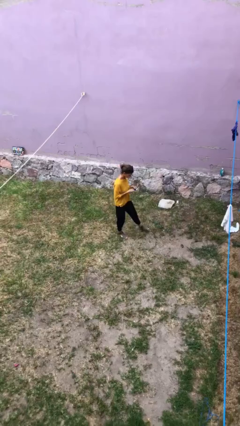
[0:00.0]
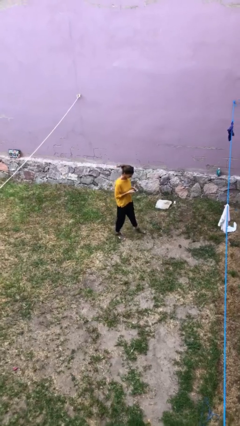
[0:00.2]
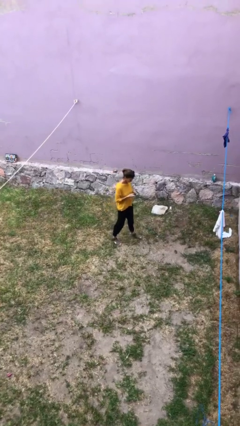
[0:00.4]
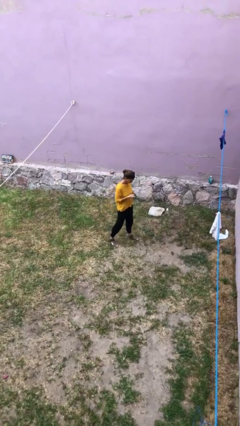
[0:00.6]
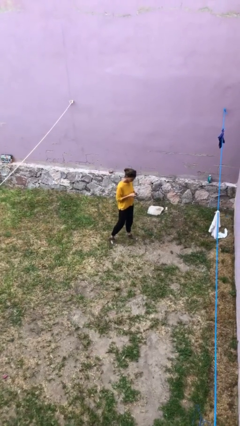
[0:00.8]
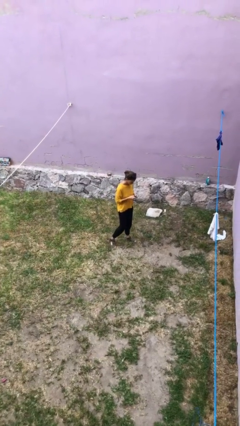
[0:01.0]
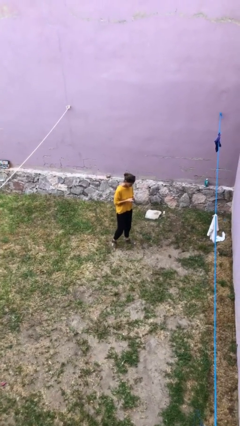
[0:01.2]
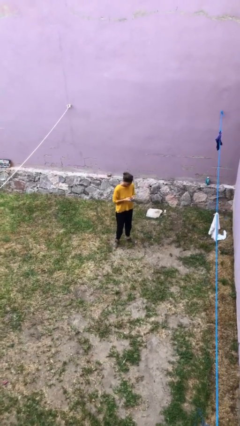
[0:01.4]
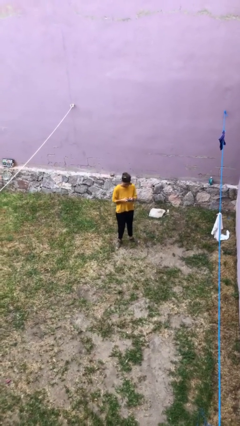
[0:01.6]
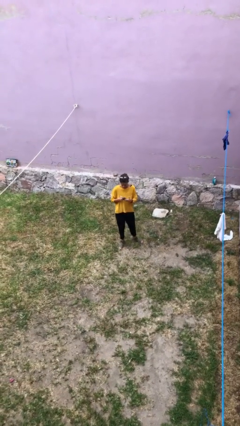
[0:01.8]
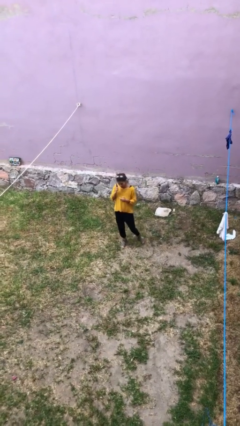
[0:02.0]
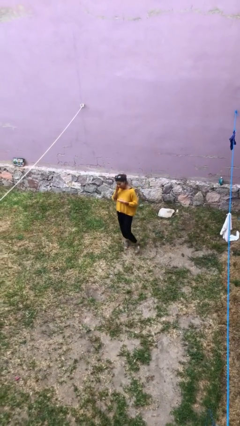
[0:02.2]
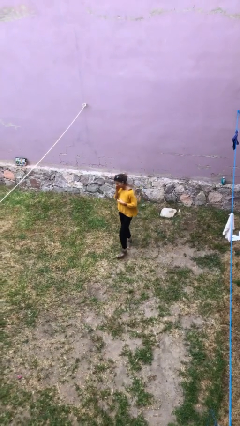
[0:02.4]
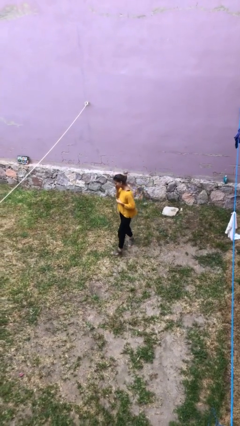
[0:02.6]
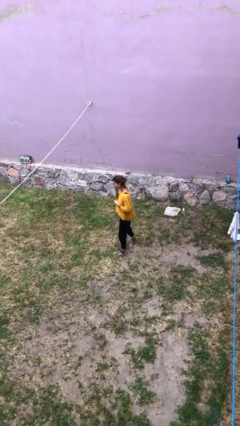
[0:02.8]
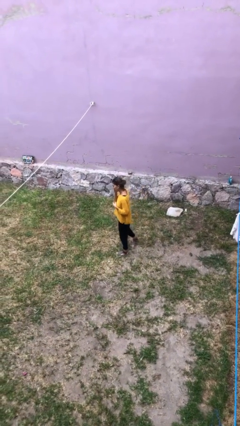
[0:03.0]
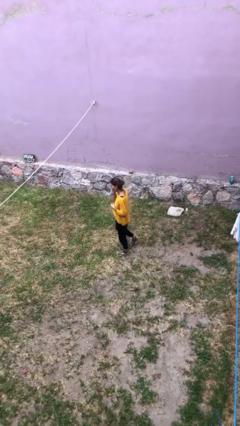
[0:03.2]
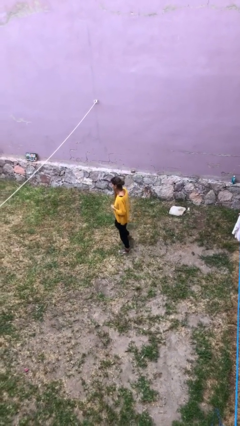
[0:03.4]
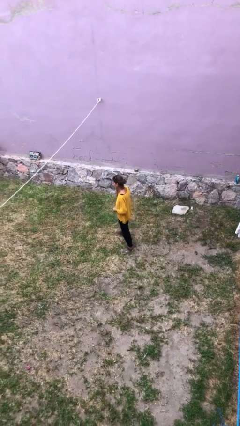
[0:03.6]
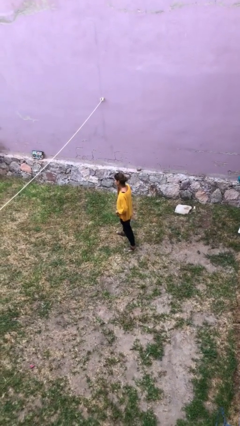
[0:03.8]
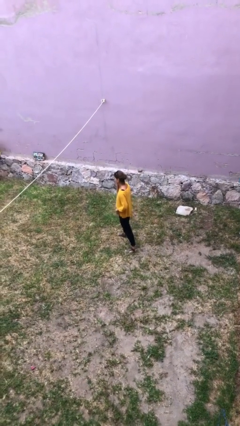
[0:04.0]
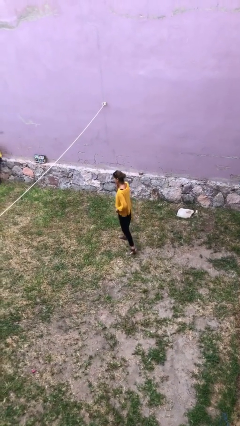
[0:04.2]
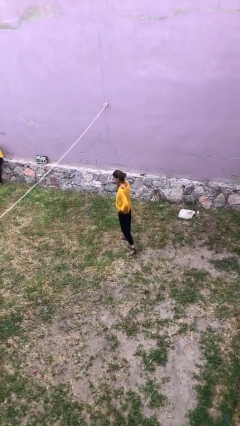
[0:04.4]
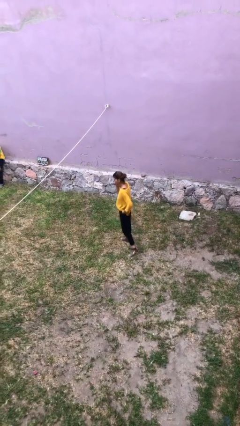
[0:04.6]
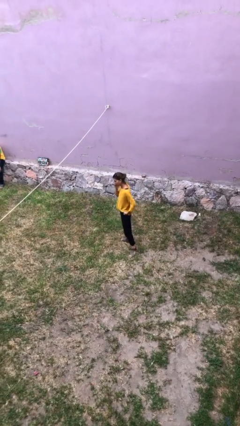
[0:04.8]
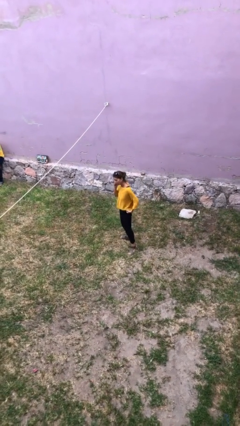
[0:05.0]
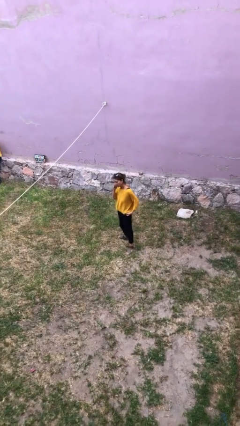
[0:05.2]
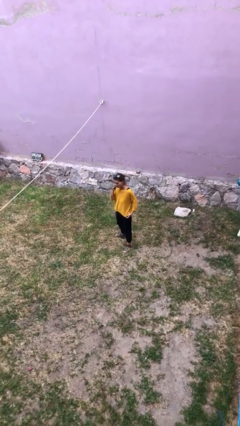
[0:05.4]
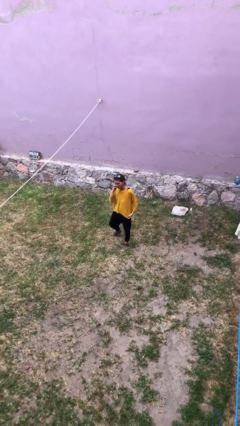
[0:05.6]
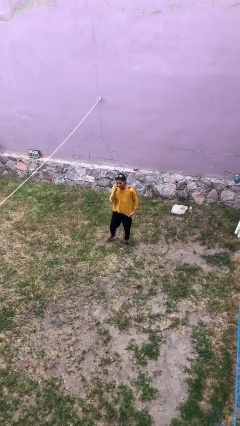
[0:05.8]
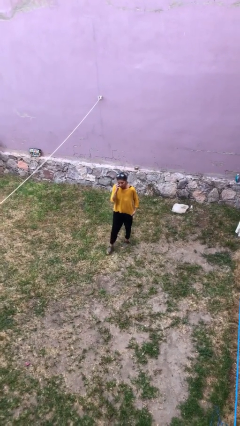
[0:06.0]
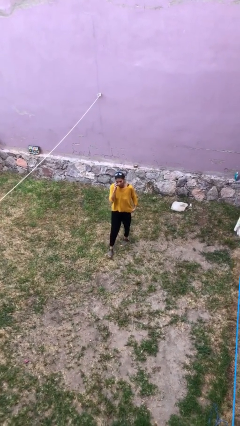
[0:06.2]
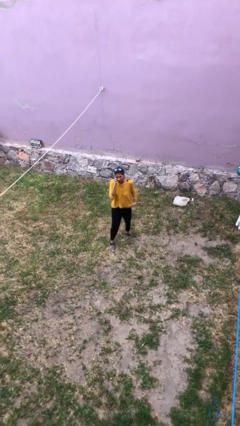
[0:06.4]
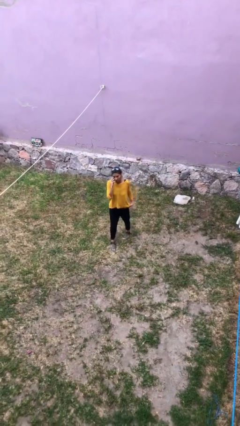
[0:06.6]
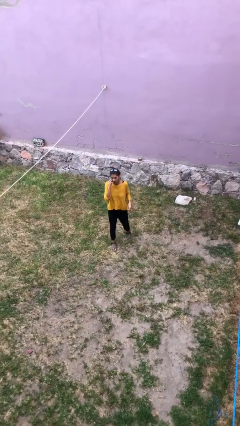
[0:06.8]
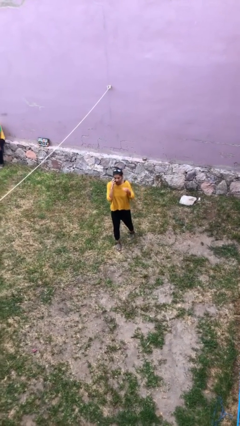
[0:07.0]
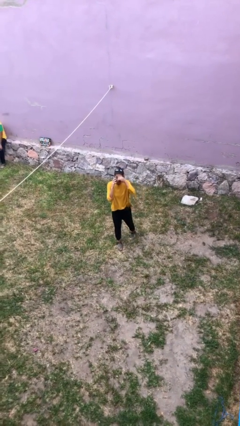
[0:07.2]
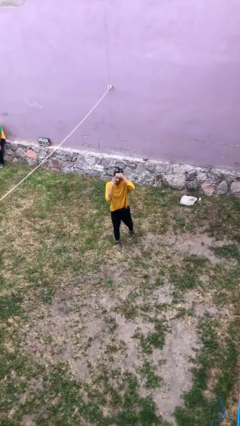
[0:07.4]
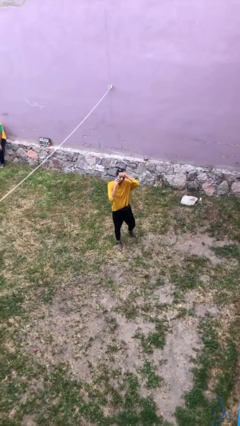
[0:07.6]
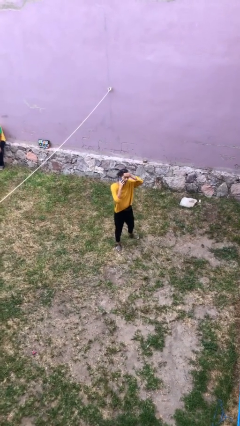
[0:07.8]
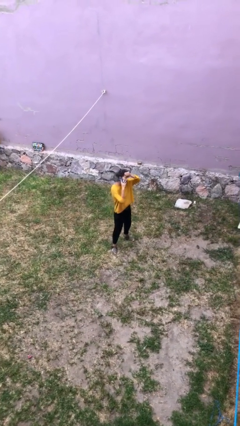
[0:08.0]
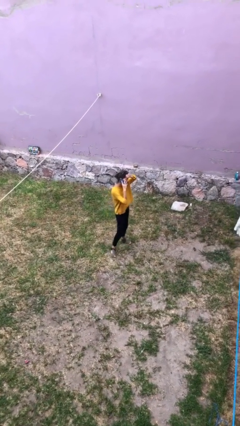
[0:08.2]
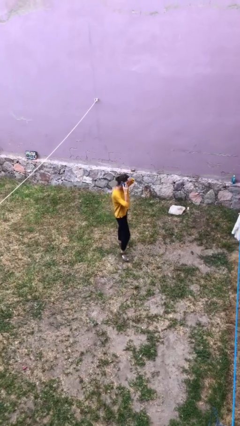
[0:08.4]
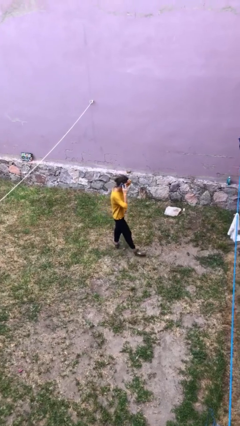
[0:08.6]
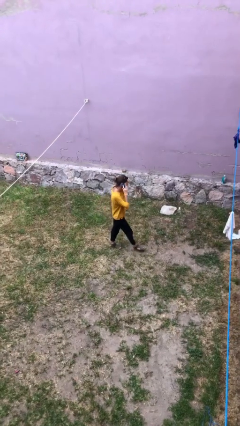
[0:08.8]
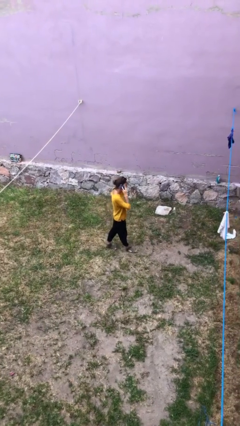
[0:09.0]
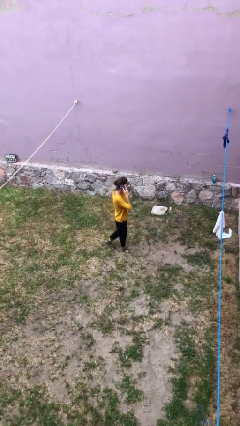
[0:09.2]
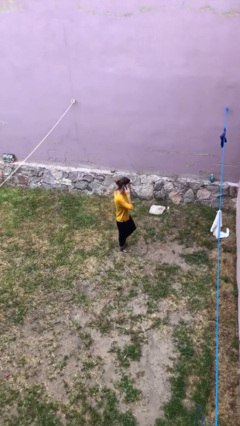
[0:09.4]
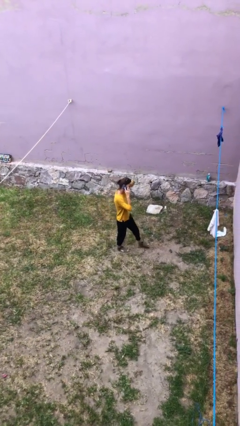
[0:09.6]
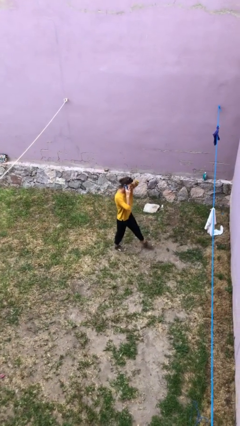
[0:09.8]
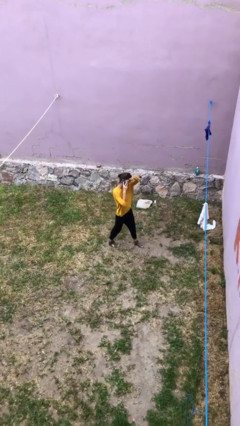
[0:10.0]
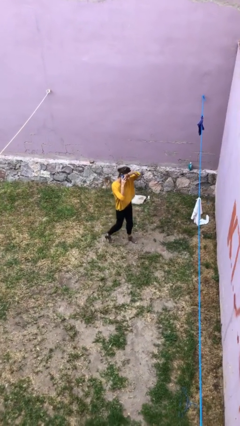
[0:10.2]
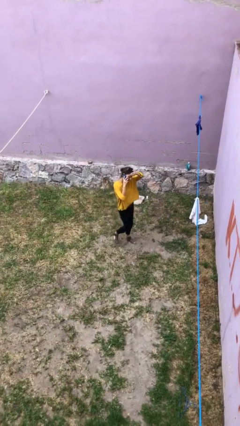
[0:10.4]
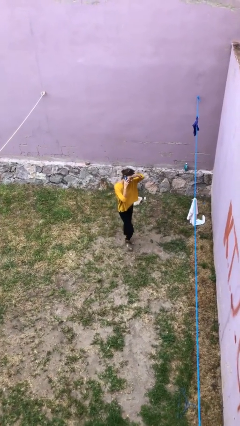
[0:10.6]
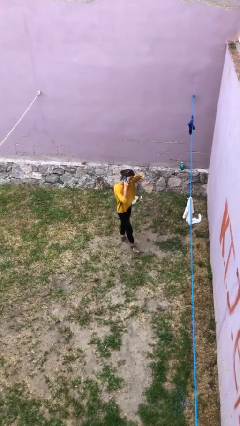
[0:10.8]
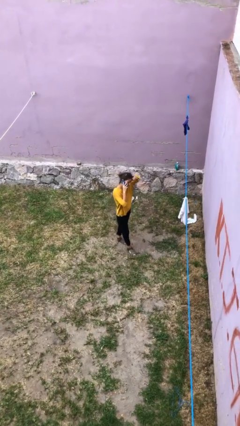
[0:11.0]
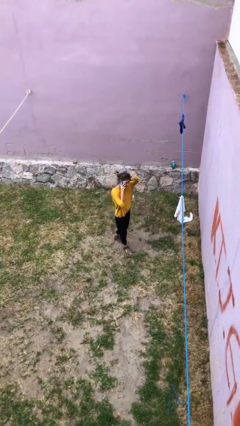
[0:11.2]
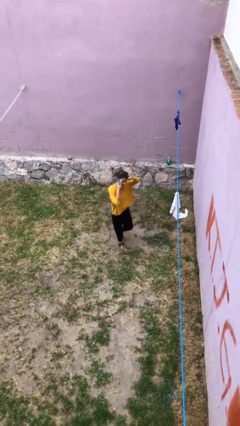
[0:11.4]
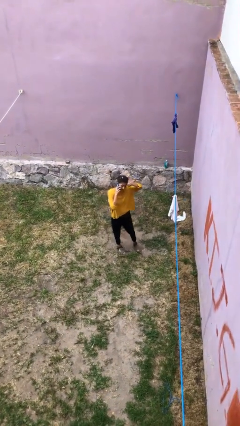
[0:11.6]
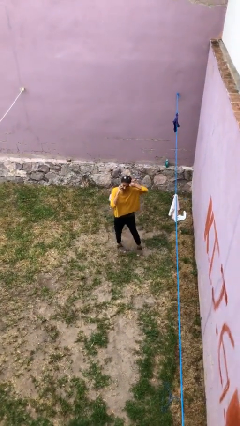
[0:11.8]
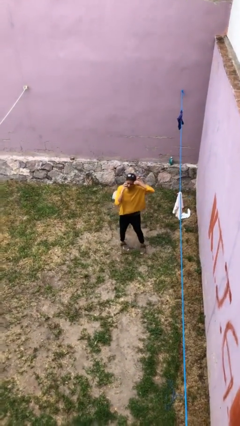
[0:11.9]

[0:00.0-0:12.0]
person talks on phone

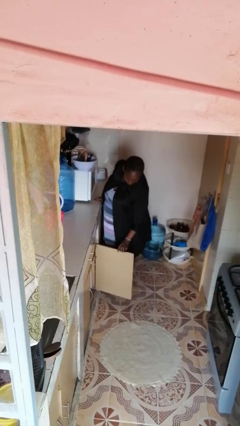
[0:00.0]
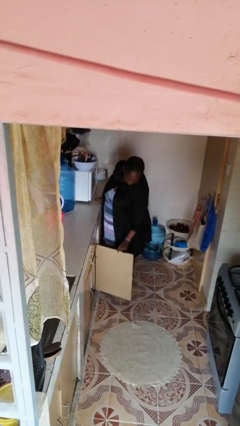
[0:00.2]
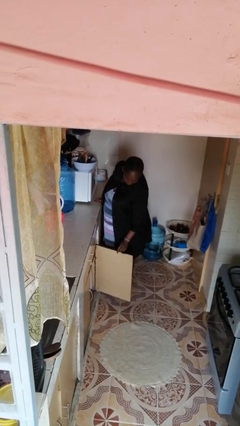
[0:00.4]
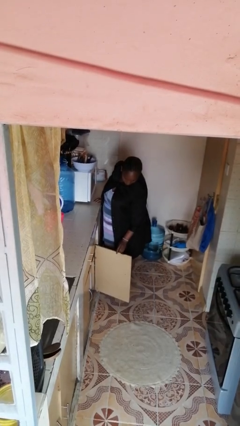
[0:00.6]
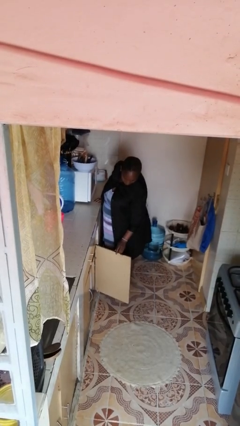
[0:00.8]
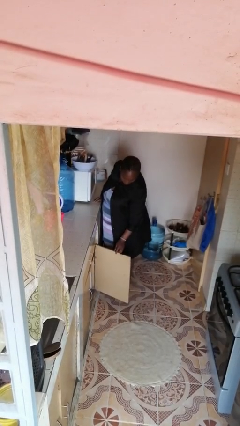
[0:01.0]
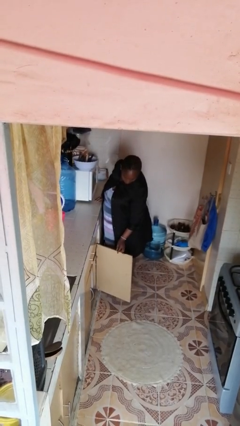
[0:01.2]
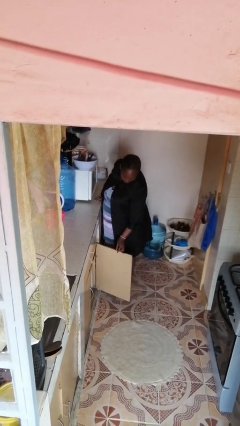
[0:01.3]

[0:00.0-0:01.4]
person opens cabinet

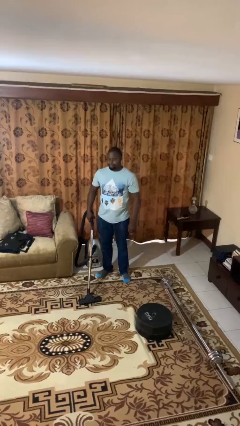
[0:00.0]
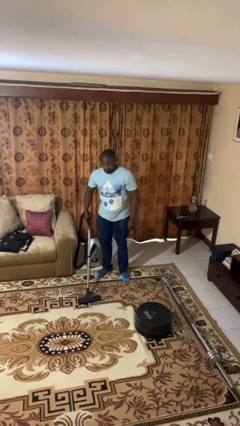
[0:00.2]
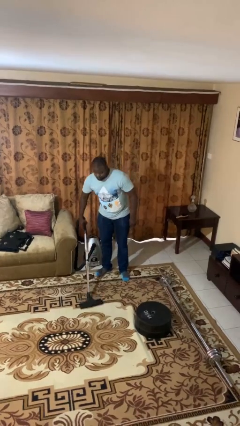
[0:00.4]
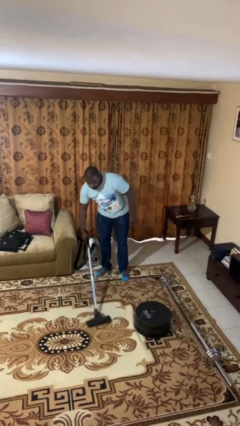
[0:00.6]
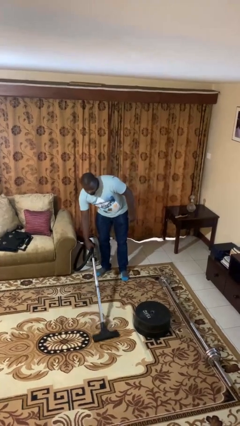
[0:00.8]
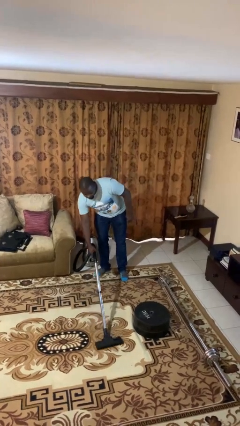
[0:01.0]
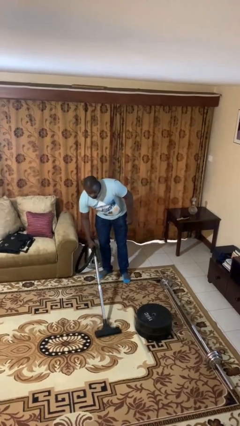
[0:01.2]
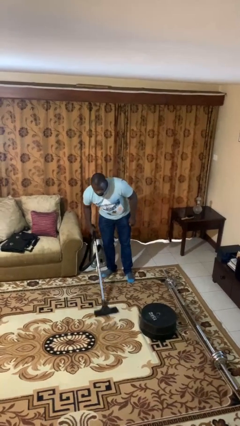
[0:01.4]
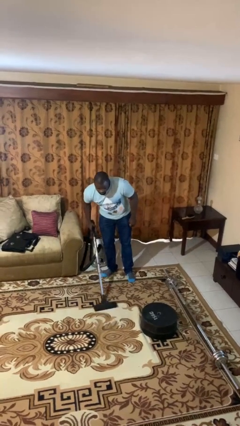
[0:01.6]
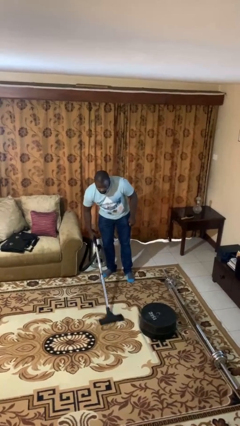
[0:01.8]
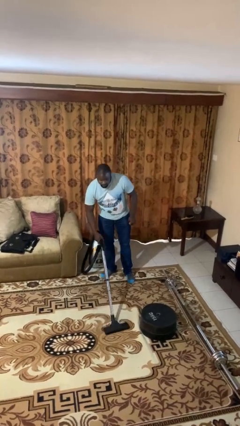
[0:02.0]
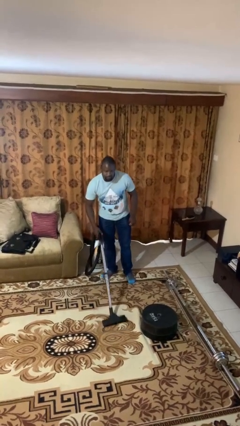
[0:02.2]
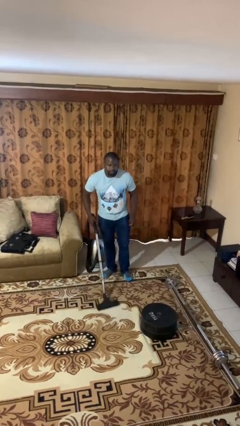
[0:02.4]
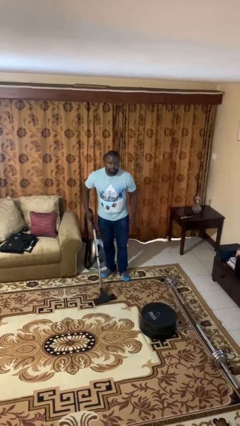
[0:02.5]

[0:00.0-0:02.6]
person vacuums carpet

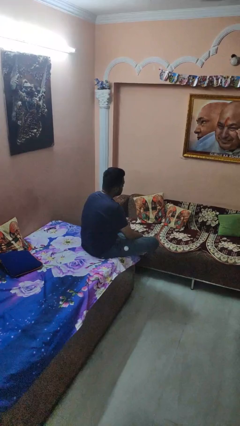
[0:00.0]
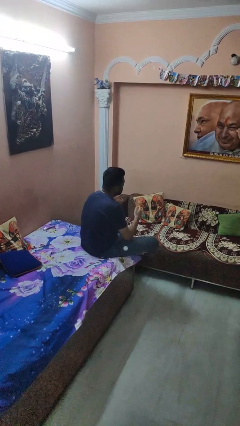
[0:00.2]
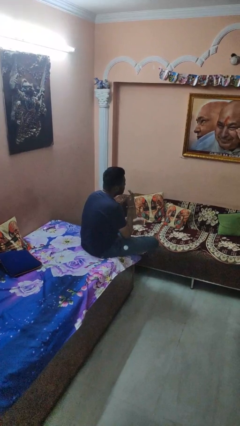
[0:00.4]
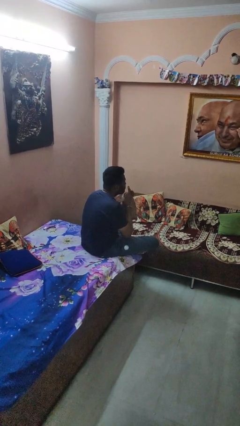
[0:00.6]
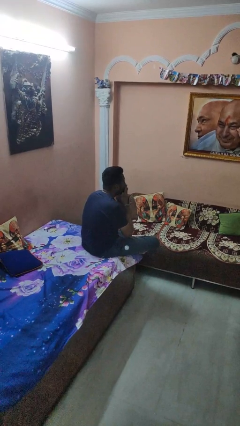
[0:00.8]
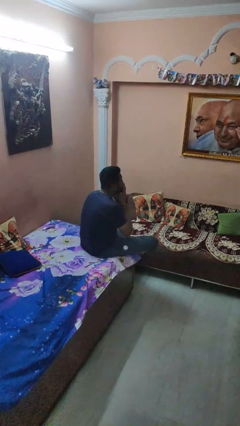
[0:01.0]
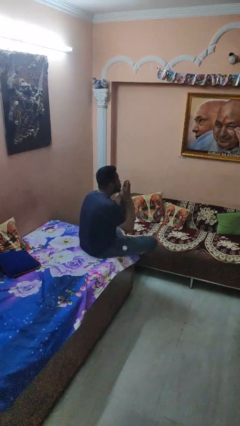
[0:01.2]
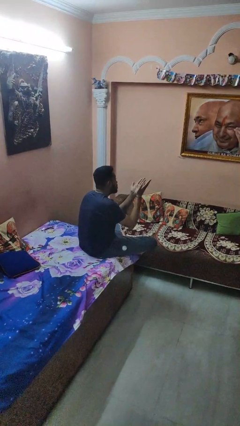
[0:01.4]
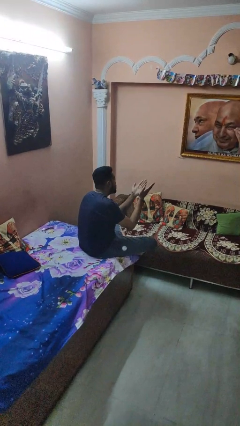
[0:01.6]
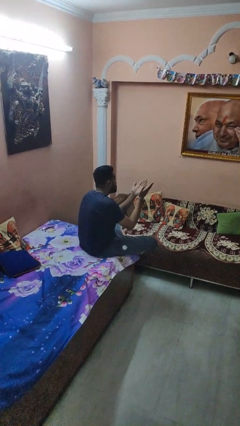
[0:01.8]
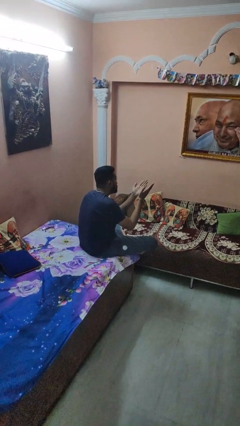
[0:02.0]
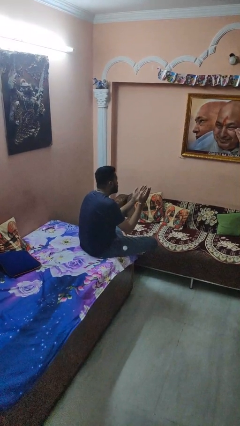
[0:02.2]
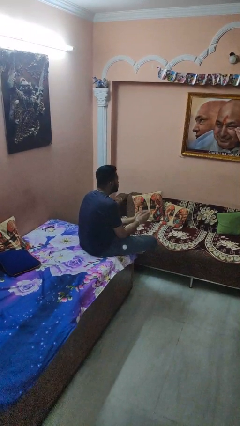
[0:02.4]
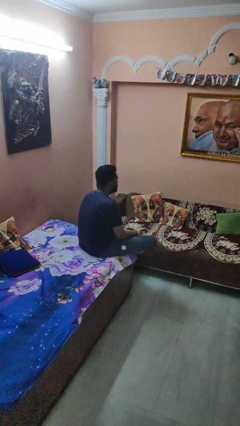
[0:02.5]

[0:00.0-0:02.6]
person gestures blow kiss
